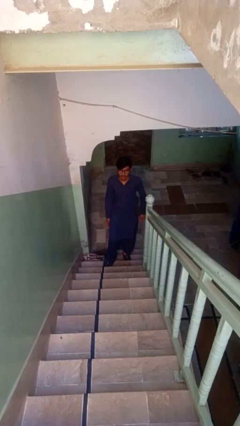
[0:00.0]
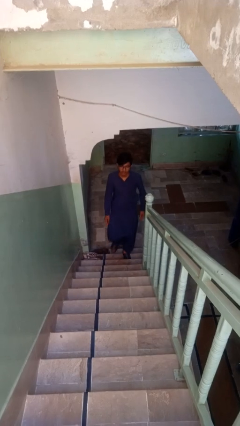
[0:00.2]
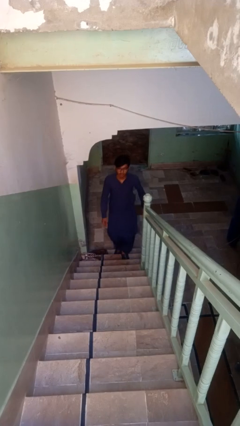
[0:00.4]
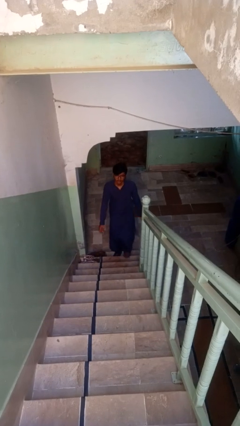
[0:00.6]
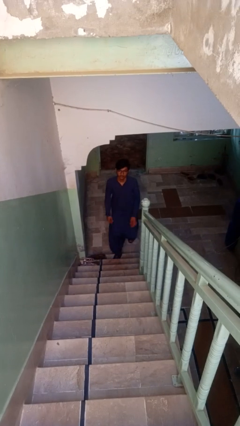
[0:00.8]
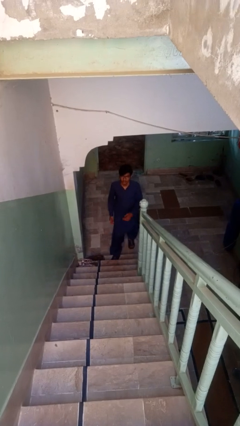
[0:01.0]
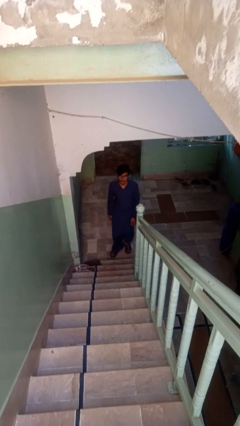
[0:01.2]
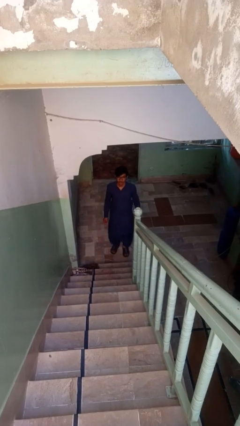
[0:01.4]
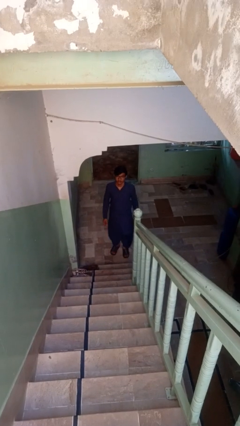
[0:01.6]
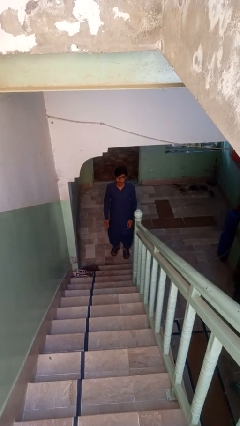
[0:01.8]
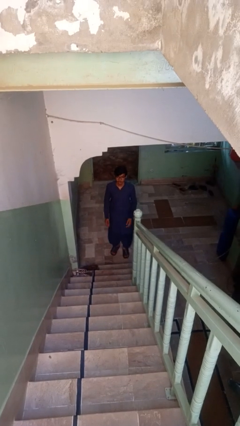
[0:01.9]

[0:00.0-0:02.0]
person climbs down stairs

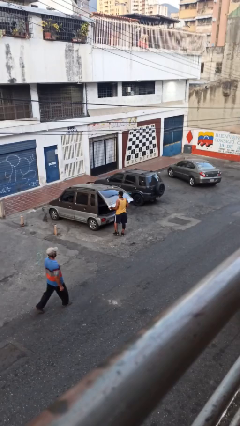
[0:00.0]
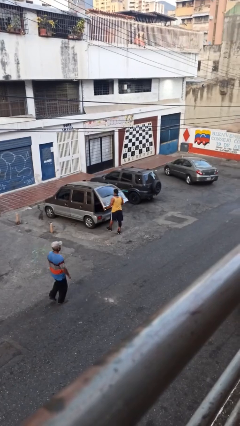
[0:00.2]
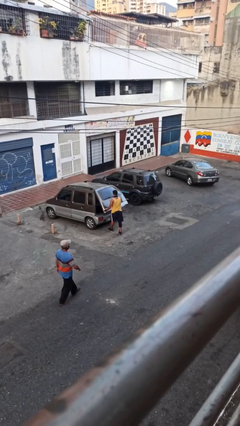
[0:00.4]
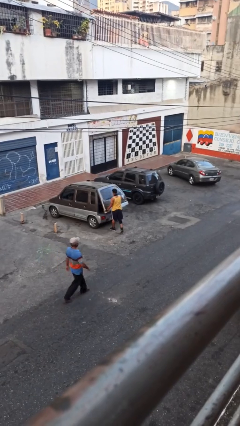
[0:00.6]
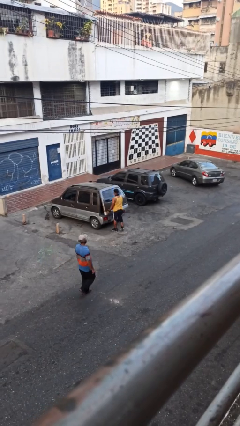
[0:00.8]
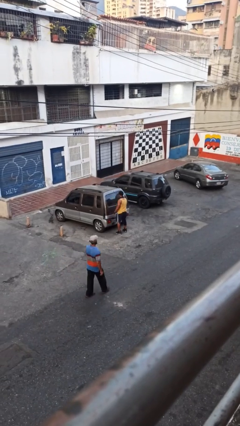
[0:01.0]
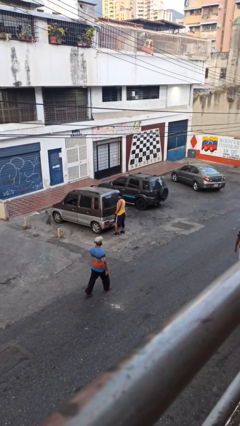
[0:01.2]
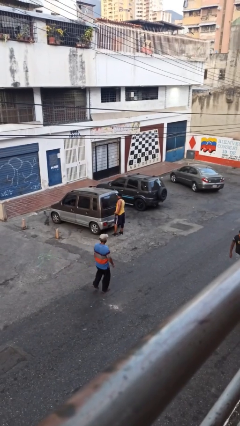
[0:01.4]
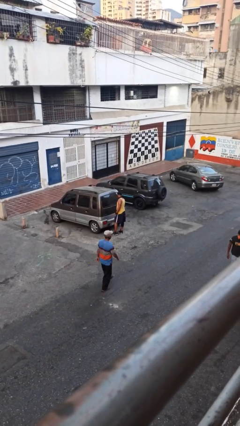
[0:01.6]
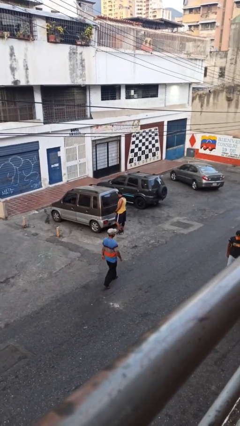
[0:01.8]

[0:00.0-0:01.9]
person closes car trunk

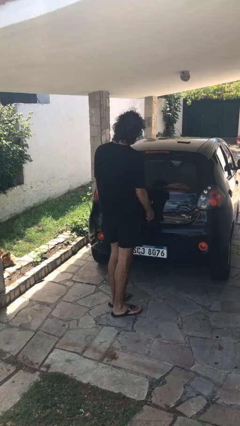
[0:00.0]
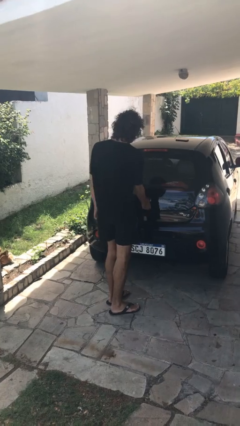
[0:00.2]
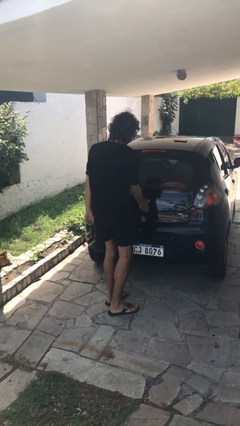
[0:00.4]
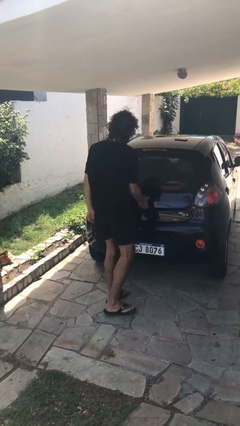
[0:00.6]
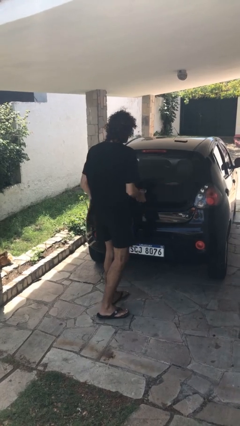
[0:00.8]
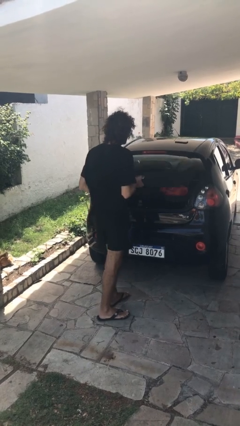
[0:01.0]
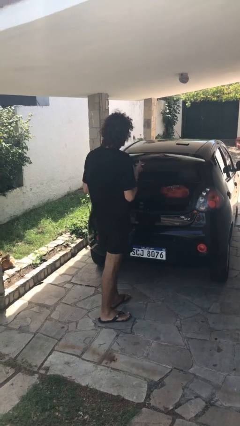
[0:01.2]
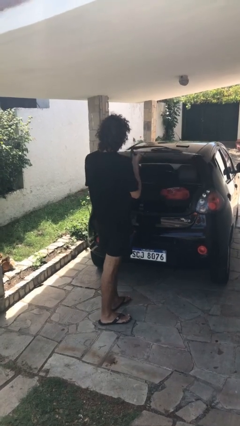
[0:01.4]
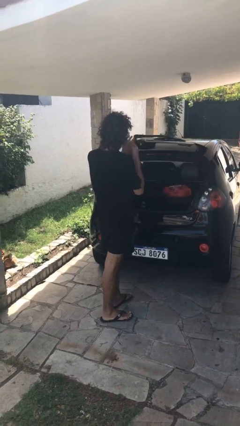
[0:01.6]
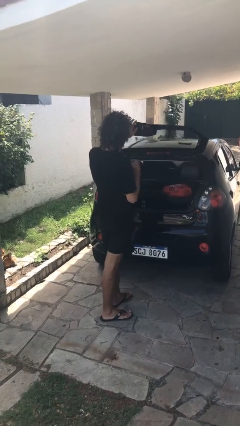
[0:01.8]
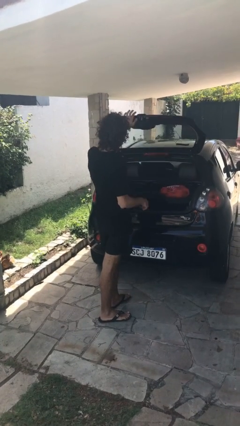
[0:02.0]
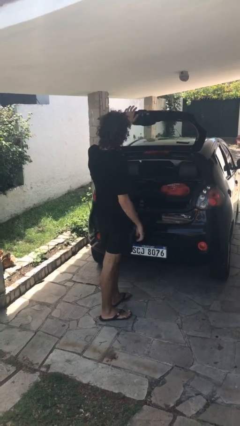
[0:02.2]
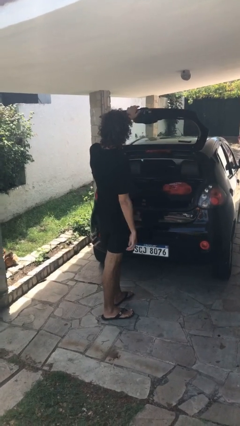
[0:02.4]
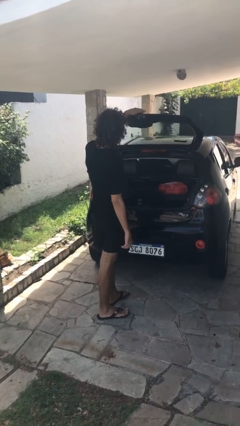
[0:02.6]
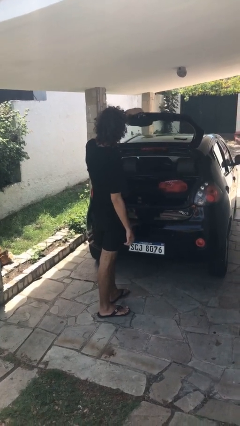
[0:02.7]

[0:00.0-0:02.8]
person opens car trunk

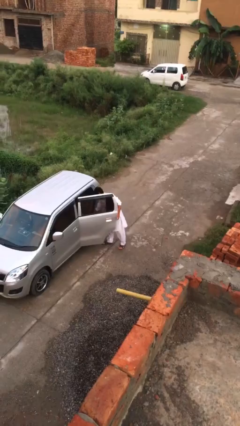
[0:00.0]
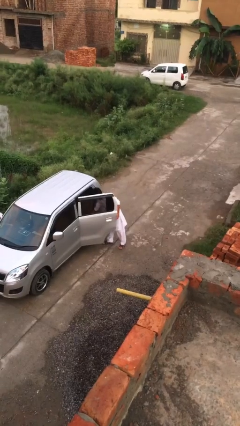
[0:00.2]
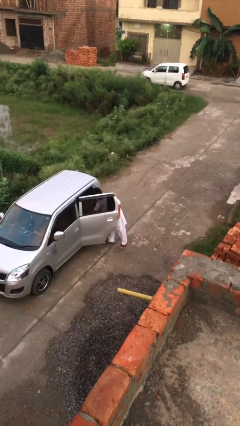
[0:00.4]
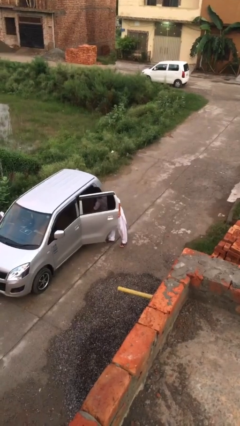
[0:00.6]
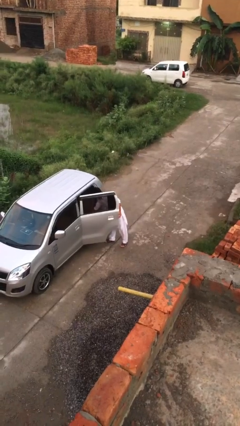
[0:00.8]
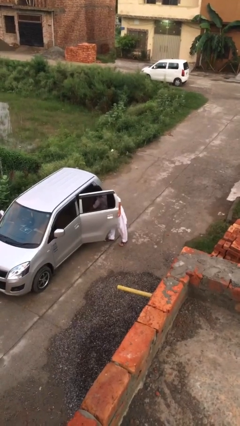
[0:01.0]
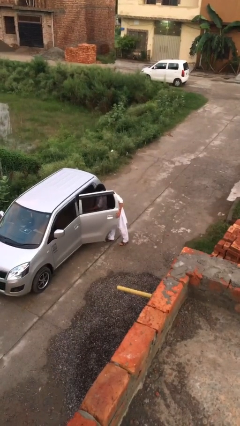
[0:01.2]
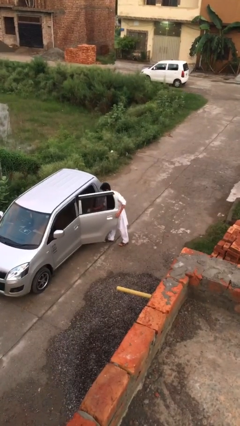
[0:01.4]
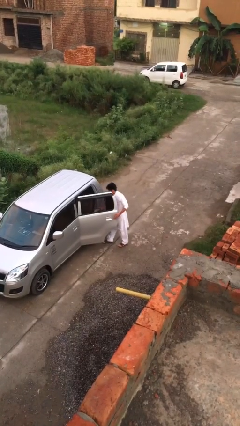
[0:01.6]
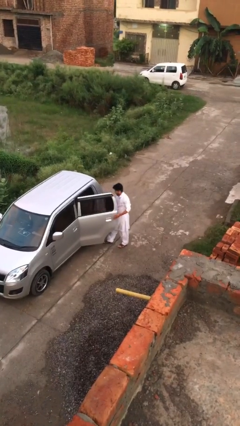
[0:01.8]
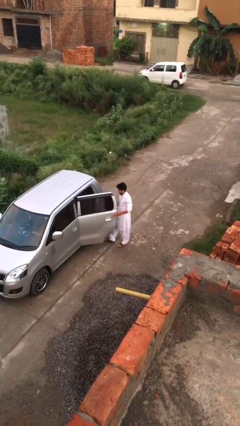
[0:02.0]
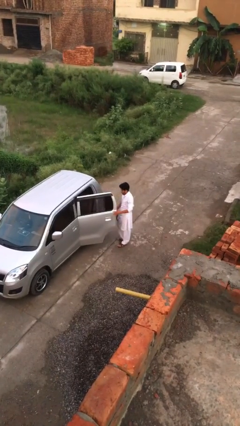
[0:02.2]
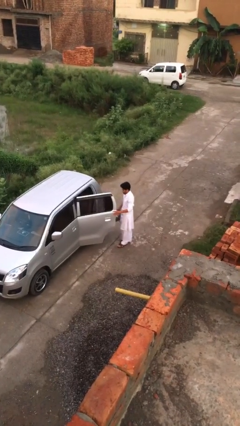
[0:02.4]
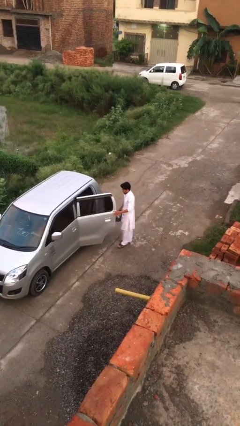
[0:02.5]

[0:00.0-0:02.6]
person unloads car

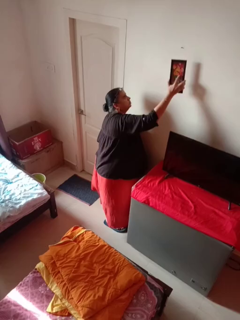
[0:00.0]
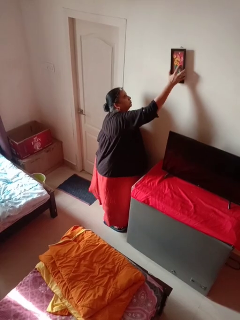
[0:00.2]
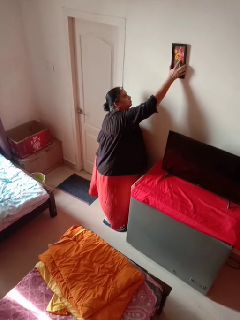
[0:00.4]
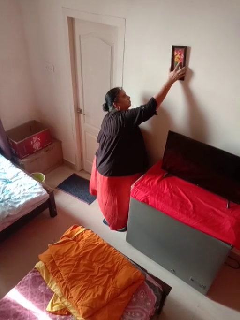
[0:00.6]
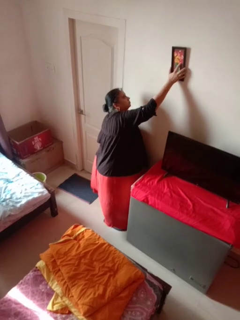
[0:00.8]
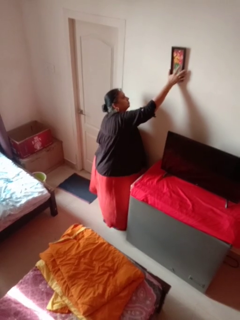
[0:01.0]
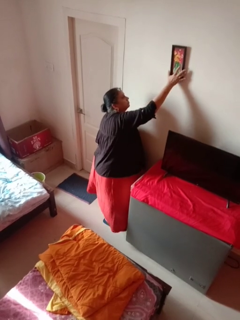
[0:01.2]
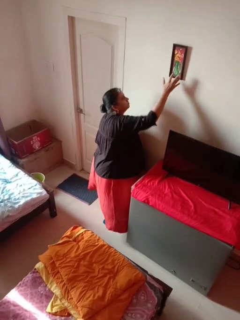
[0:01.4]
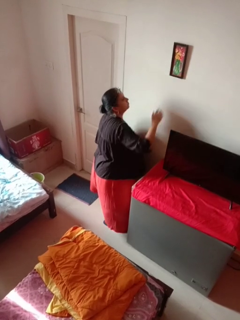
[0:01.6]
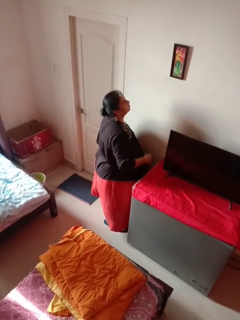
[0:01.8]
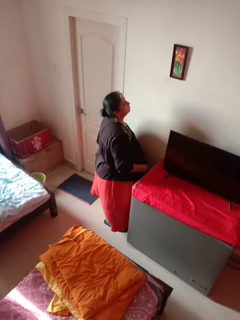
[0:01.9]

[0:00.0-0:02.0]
person puts up picture frame

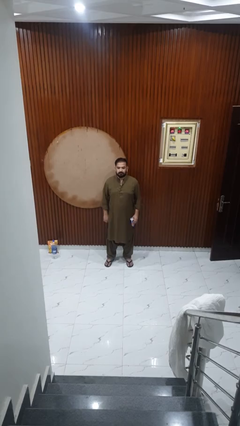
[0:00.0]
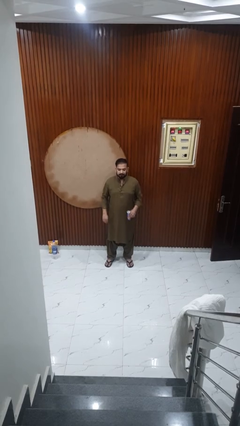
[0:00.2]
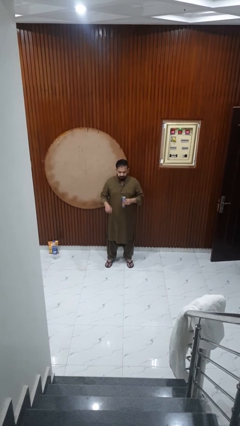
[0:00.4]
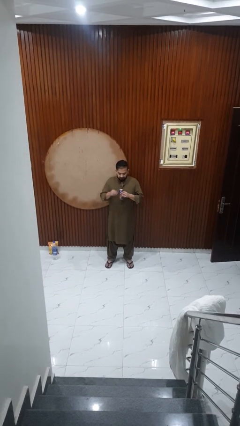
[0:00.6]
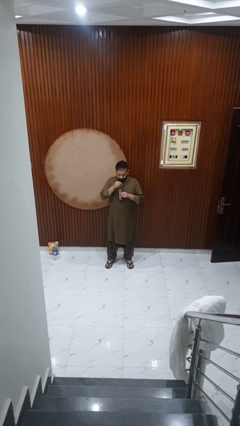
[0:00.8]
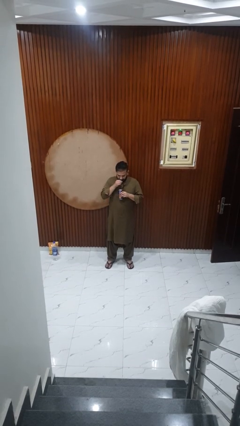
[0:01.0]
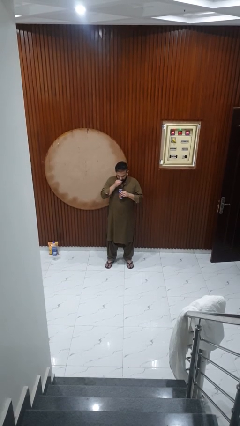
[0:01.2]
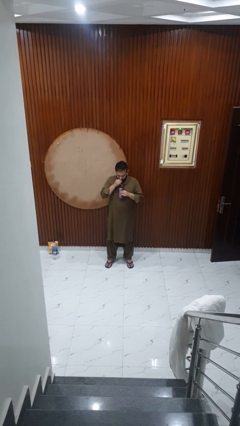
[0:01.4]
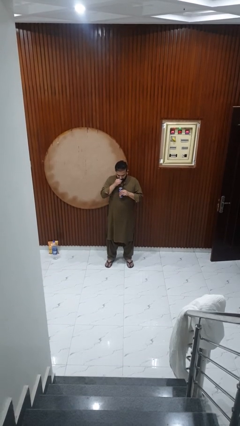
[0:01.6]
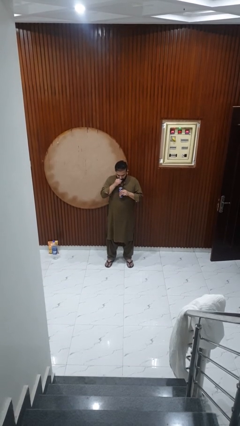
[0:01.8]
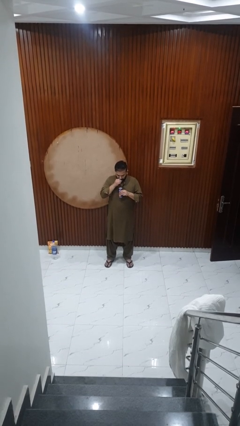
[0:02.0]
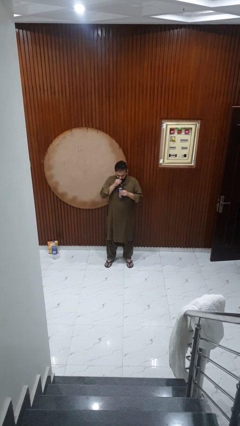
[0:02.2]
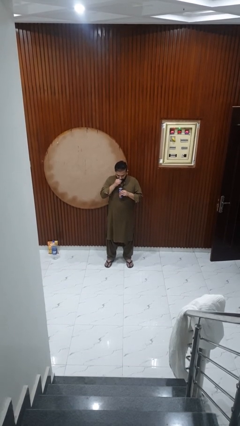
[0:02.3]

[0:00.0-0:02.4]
person drinks from straw

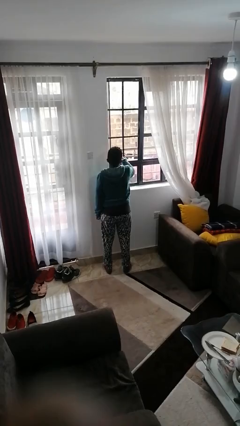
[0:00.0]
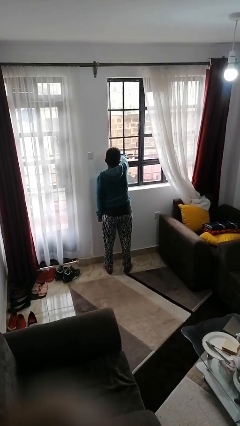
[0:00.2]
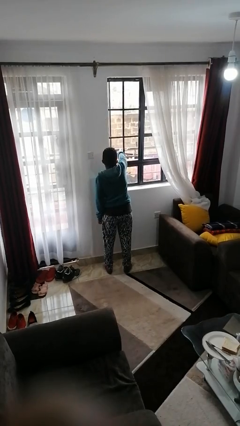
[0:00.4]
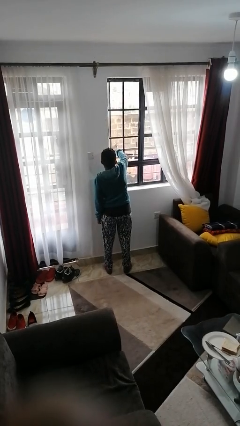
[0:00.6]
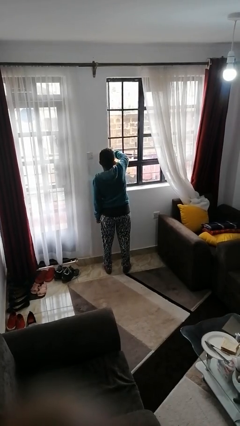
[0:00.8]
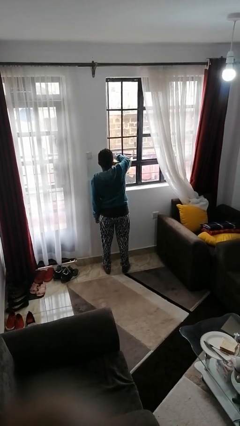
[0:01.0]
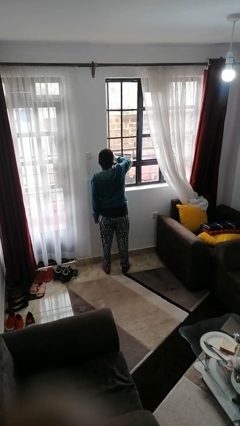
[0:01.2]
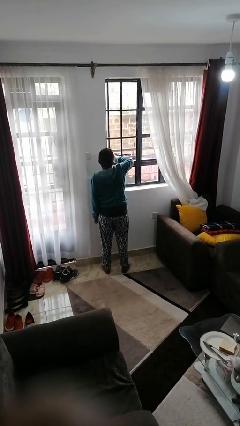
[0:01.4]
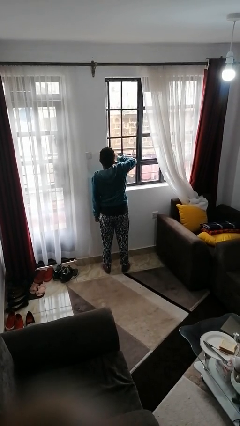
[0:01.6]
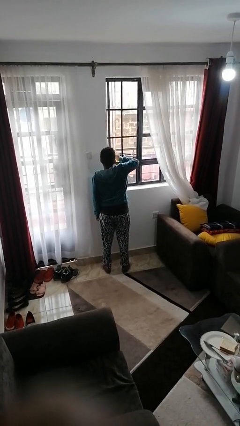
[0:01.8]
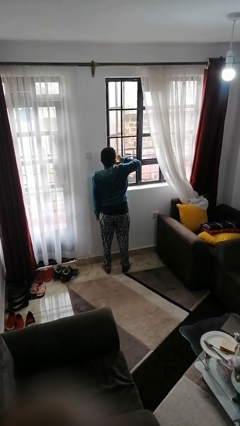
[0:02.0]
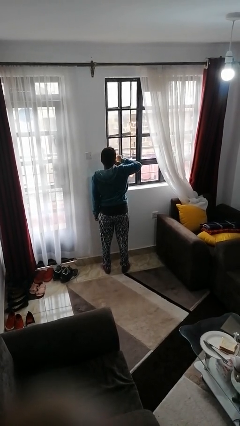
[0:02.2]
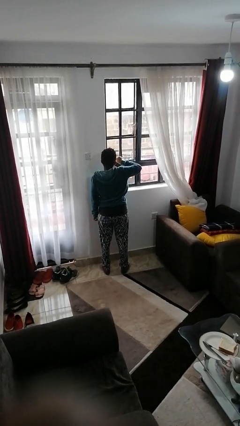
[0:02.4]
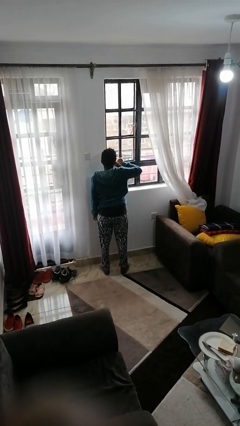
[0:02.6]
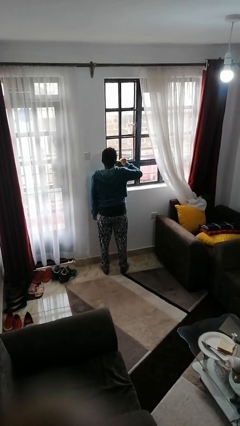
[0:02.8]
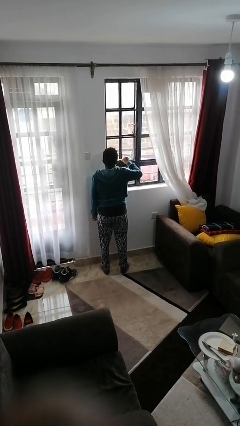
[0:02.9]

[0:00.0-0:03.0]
person closes home window

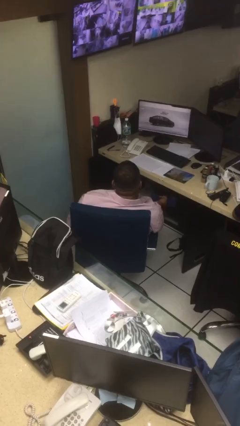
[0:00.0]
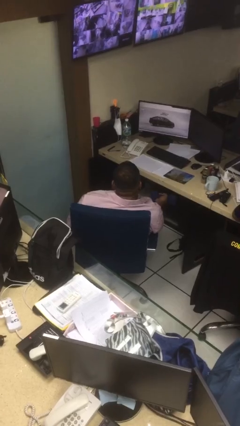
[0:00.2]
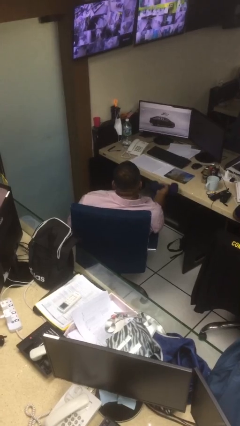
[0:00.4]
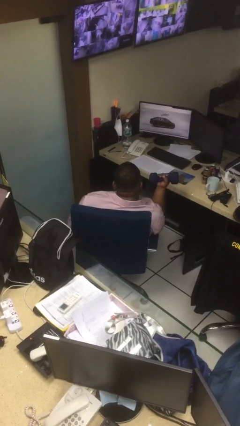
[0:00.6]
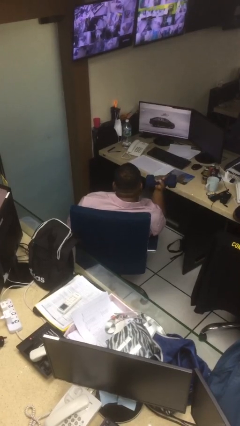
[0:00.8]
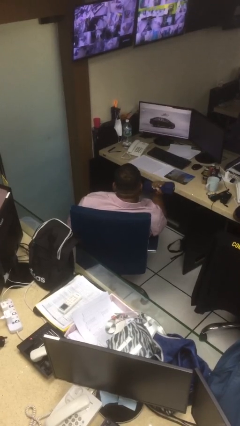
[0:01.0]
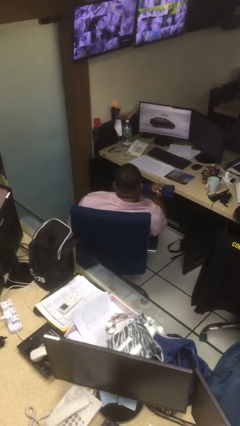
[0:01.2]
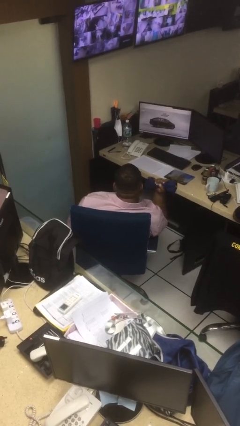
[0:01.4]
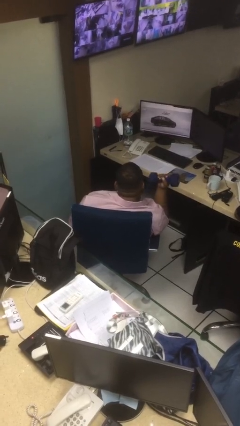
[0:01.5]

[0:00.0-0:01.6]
person lifts dumbbells
